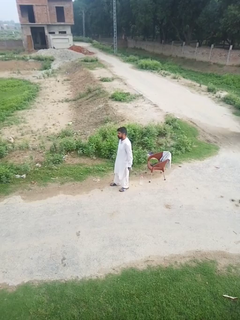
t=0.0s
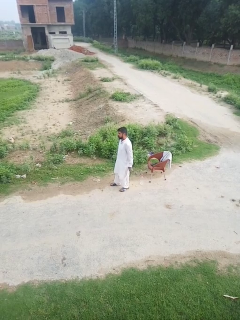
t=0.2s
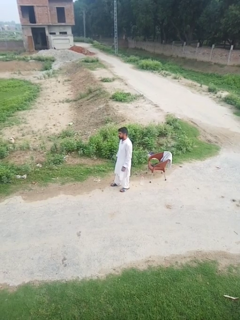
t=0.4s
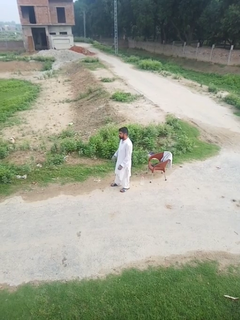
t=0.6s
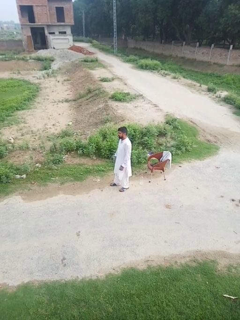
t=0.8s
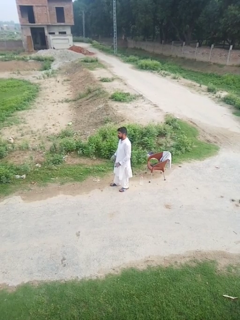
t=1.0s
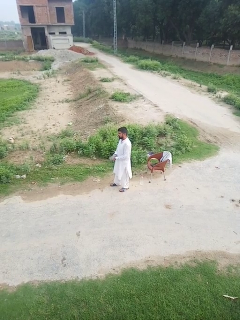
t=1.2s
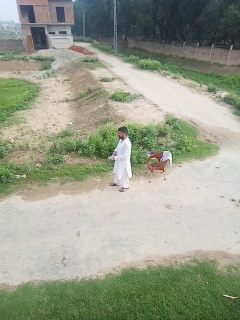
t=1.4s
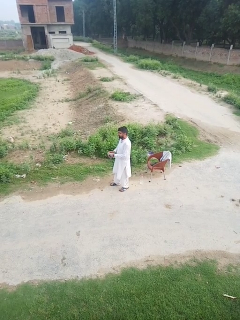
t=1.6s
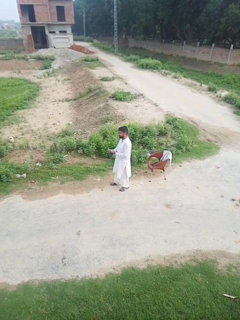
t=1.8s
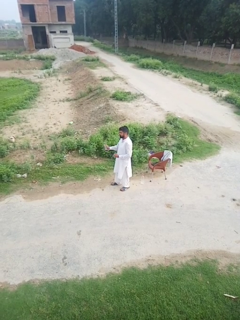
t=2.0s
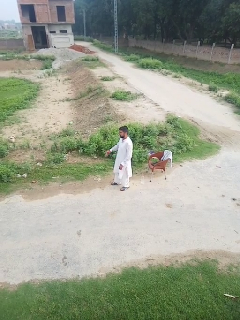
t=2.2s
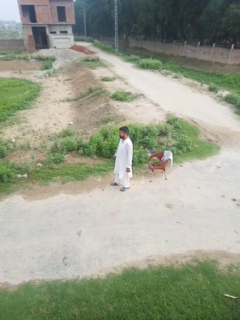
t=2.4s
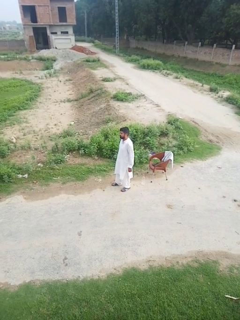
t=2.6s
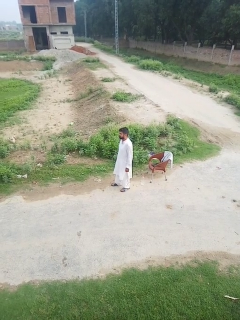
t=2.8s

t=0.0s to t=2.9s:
person takes off gloves

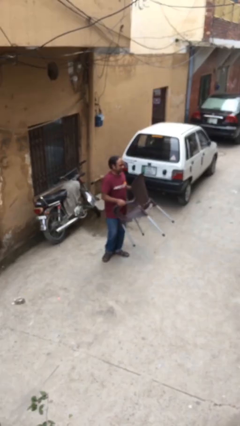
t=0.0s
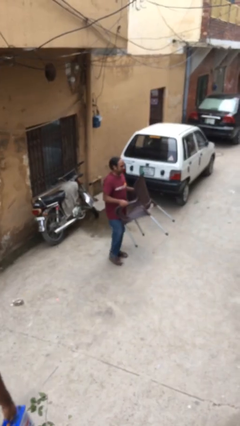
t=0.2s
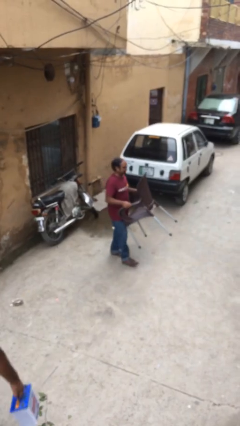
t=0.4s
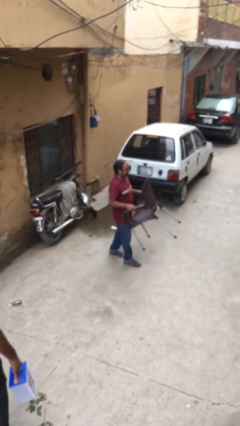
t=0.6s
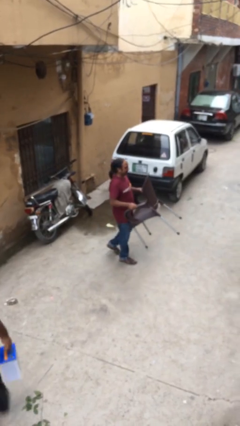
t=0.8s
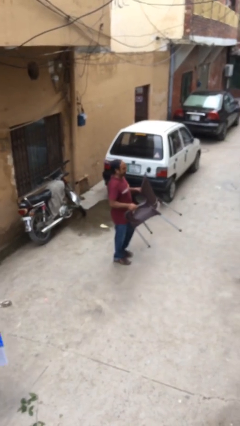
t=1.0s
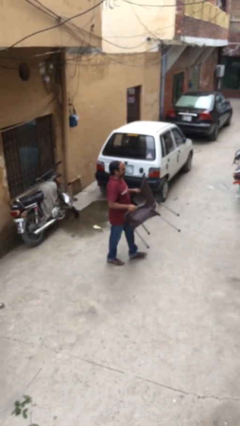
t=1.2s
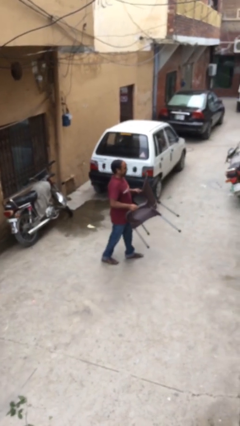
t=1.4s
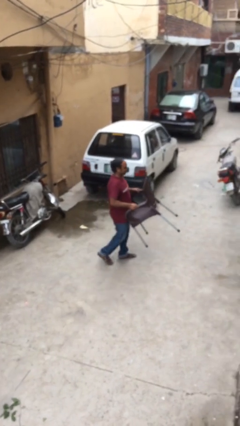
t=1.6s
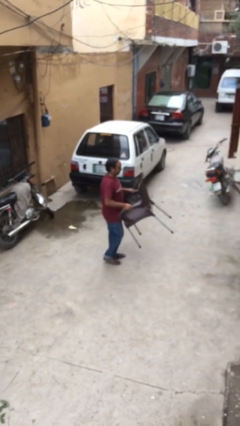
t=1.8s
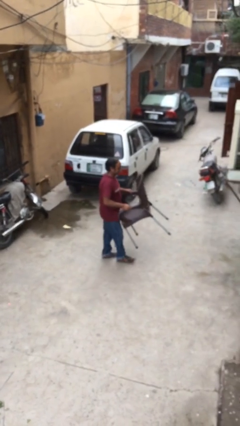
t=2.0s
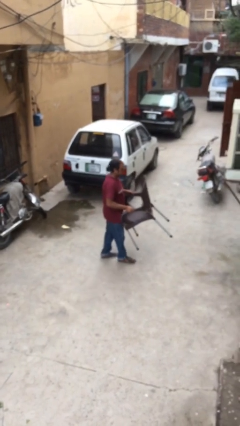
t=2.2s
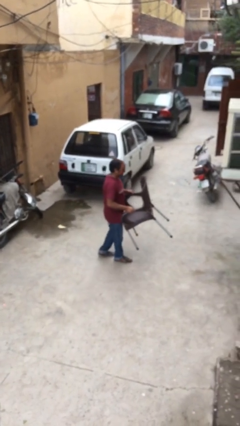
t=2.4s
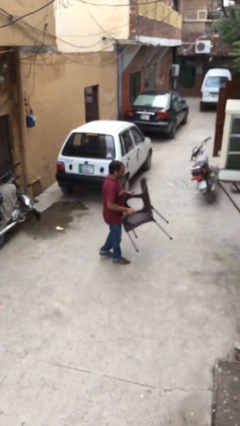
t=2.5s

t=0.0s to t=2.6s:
person carries heavy object

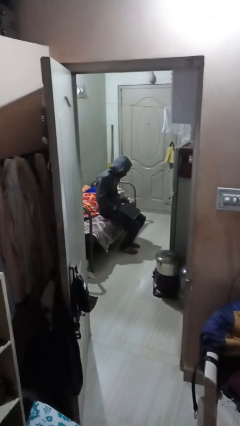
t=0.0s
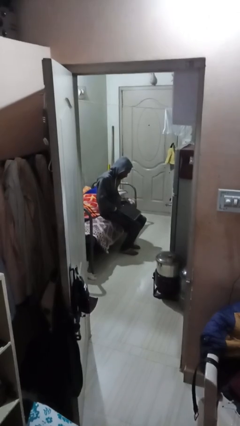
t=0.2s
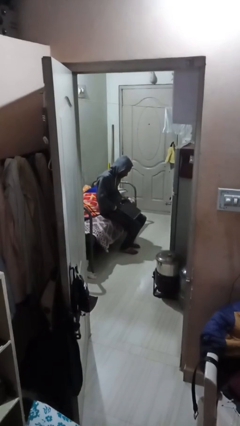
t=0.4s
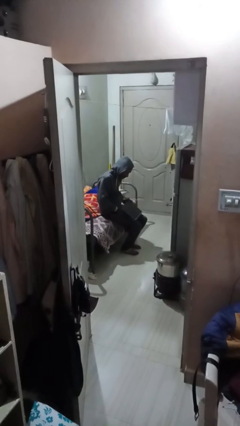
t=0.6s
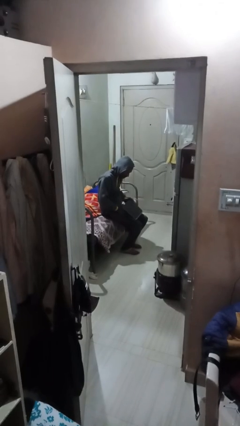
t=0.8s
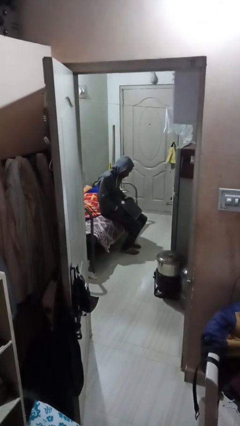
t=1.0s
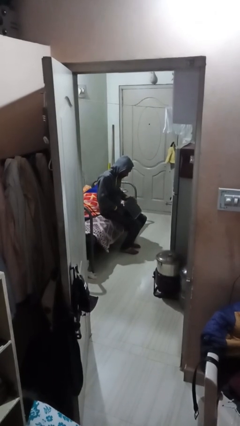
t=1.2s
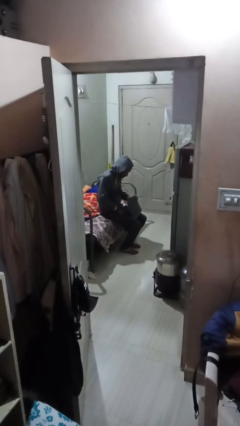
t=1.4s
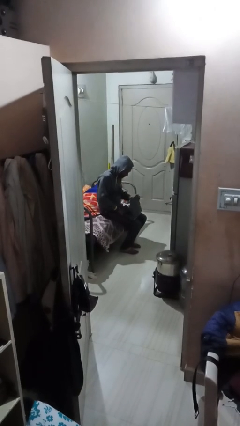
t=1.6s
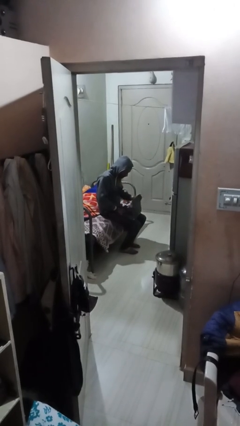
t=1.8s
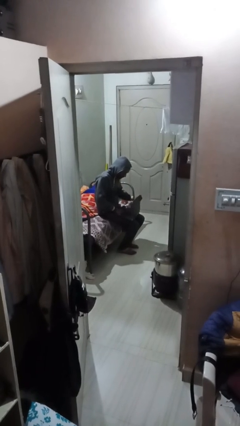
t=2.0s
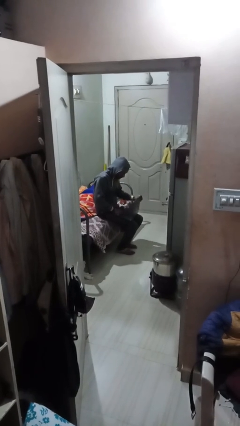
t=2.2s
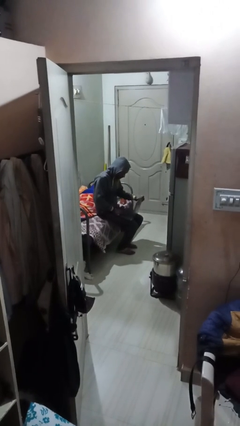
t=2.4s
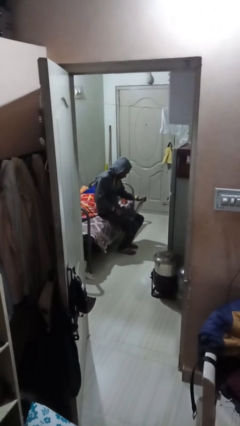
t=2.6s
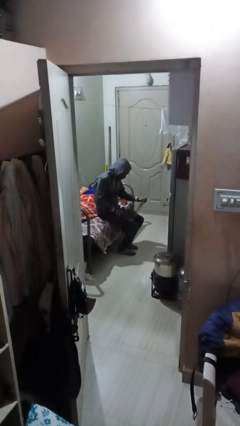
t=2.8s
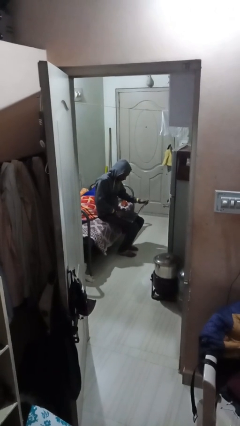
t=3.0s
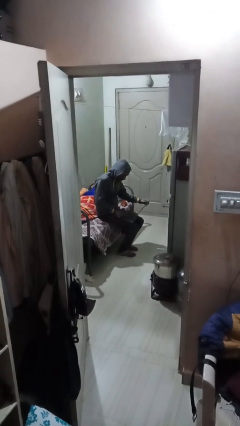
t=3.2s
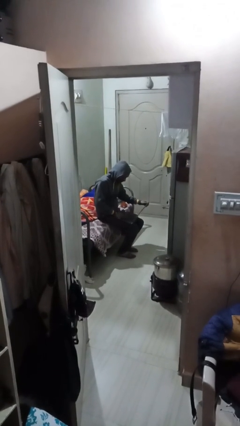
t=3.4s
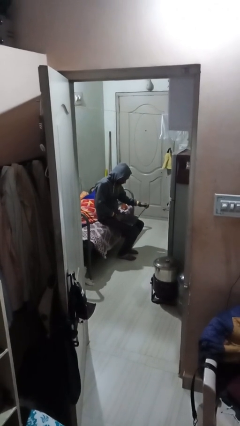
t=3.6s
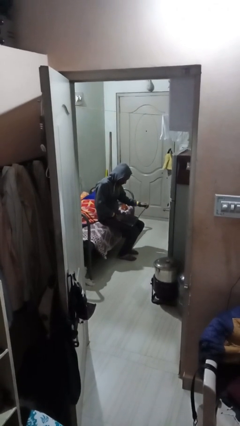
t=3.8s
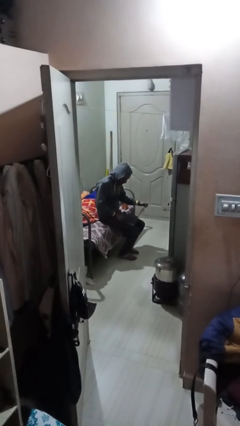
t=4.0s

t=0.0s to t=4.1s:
person interacts with laptop

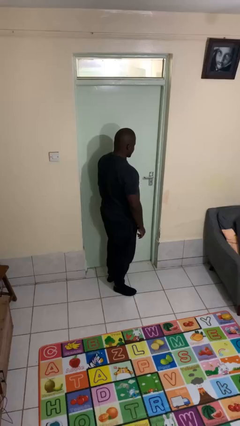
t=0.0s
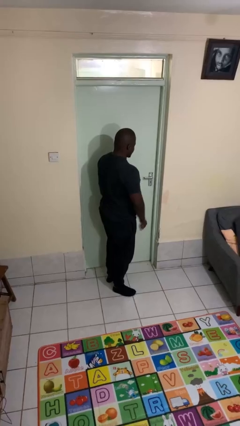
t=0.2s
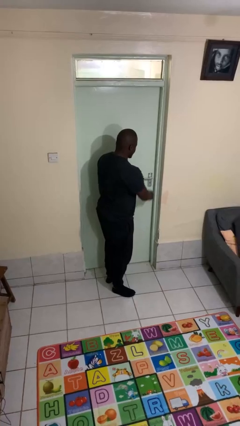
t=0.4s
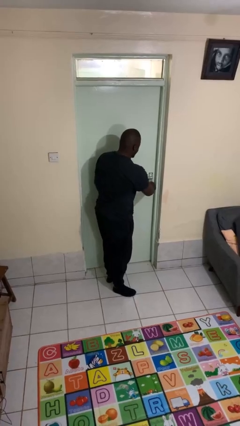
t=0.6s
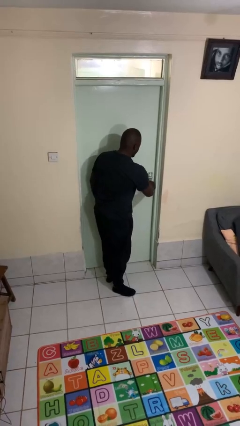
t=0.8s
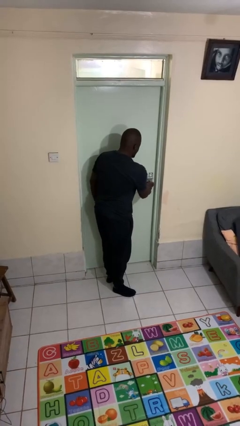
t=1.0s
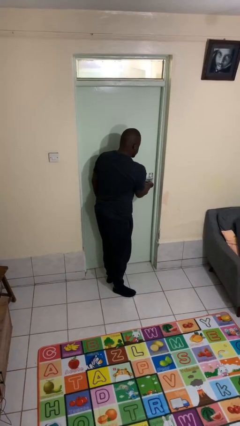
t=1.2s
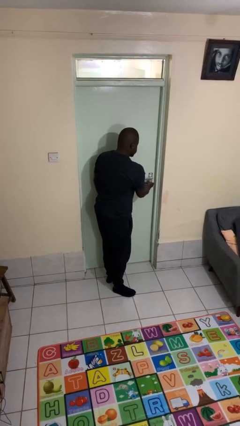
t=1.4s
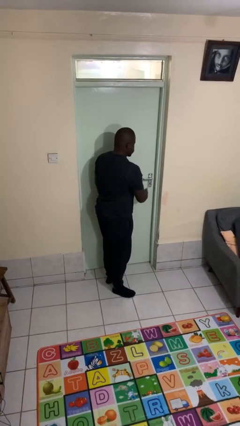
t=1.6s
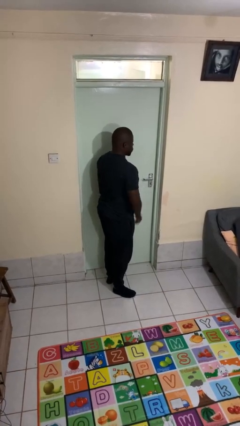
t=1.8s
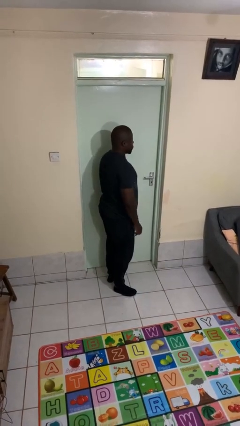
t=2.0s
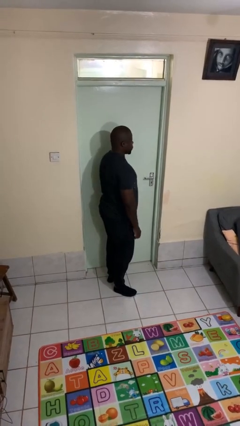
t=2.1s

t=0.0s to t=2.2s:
person locks door with keys

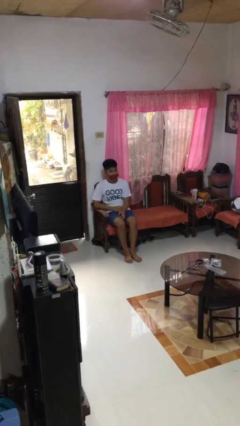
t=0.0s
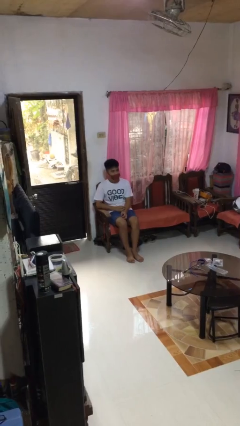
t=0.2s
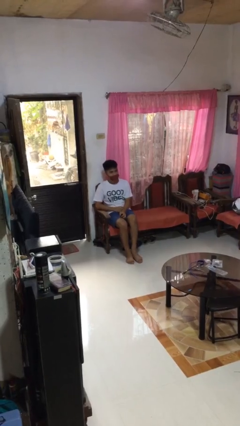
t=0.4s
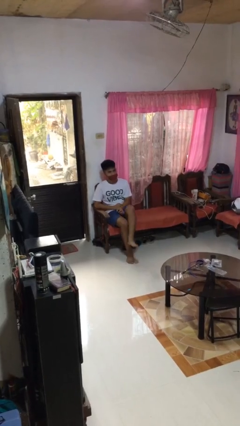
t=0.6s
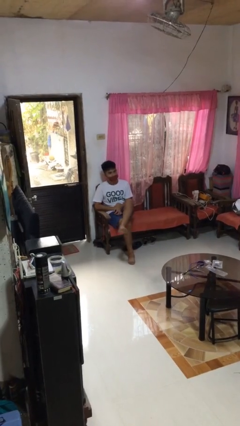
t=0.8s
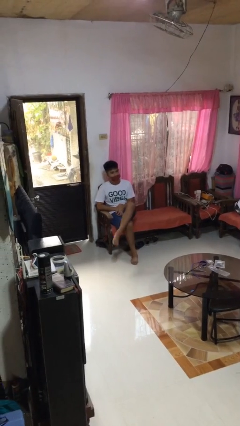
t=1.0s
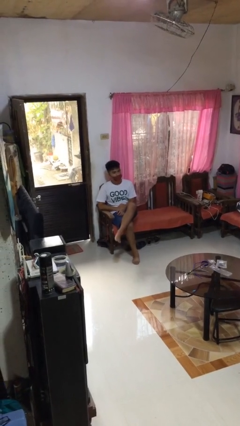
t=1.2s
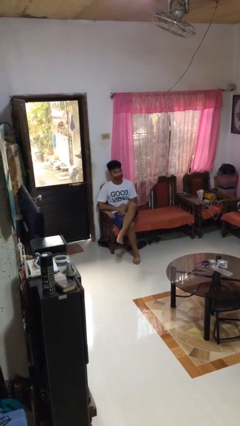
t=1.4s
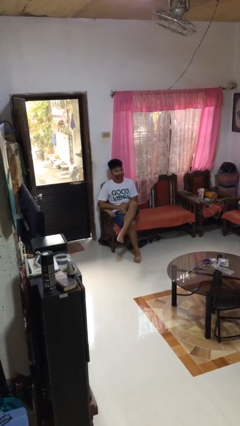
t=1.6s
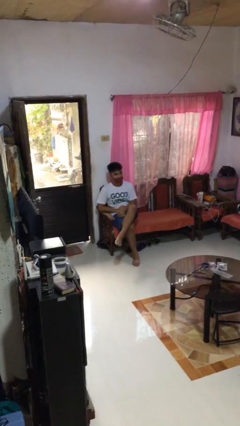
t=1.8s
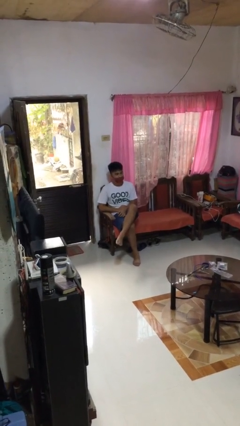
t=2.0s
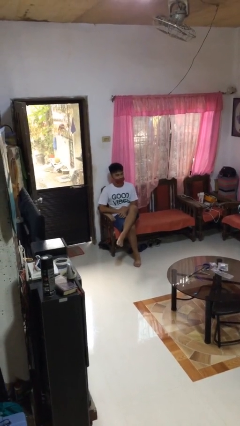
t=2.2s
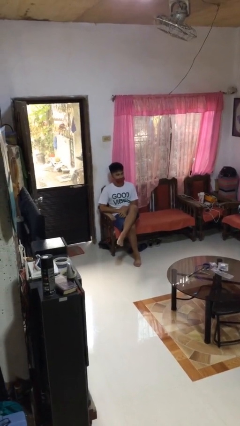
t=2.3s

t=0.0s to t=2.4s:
person crosses legs

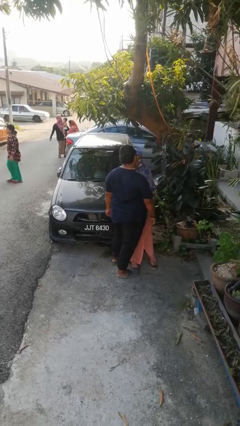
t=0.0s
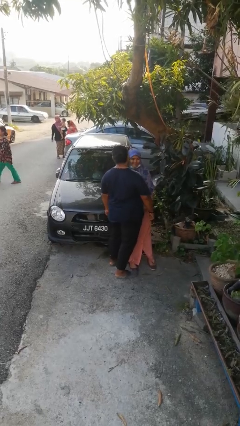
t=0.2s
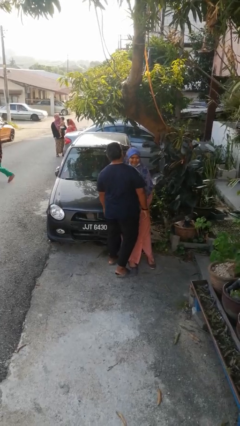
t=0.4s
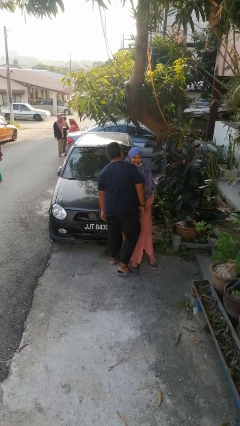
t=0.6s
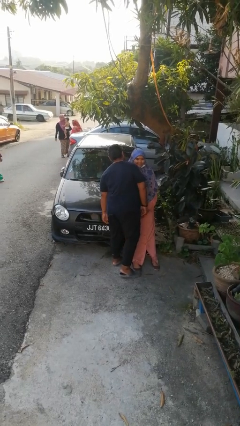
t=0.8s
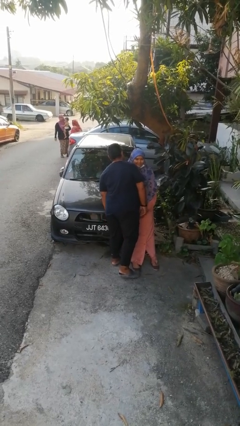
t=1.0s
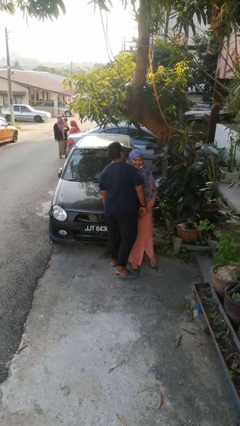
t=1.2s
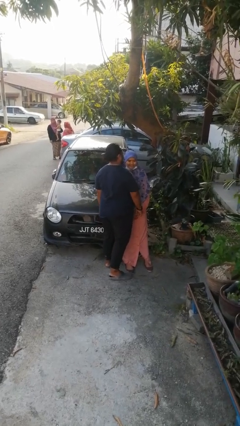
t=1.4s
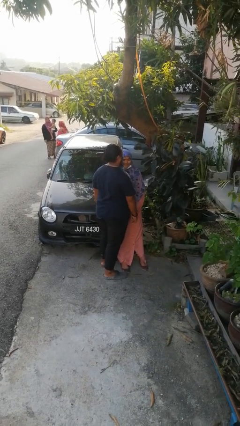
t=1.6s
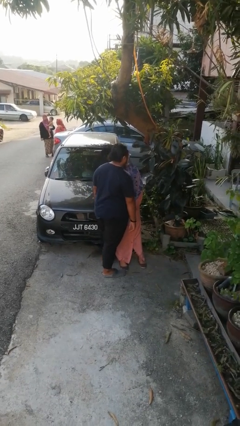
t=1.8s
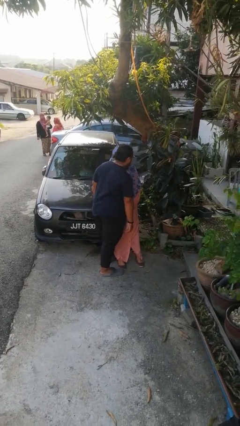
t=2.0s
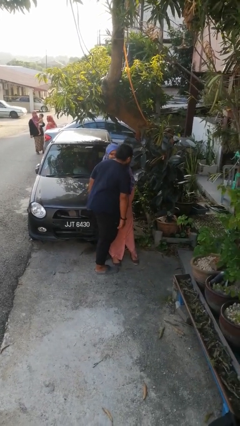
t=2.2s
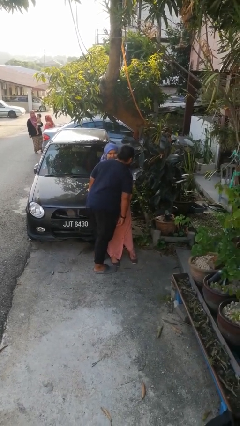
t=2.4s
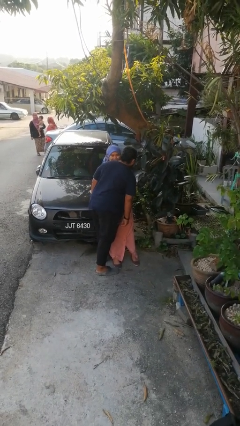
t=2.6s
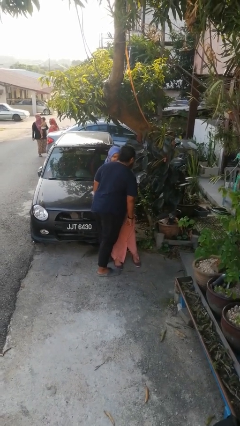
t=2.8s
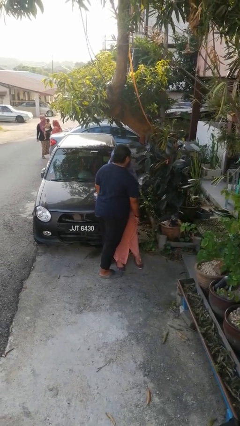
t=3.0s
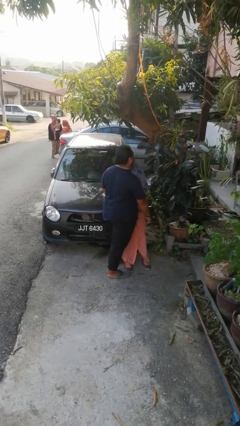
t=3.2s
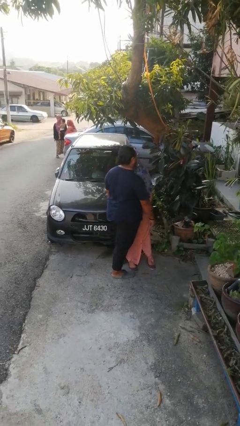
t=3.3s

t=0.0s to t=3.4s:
person kisses cheek of person

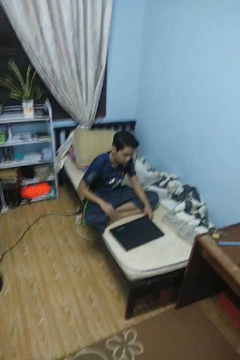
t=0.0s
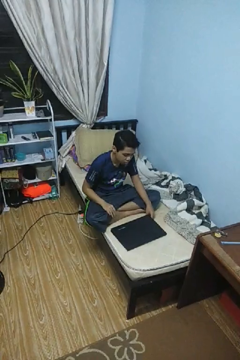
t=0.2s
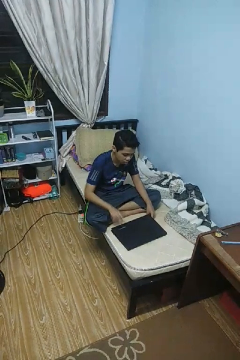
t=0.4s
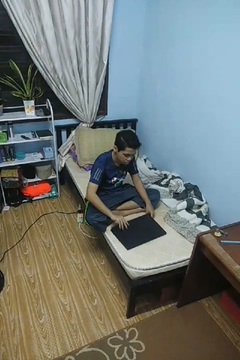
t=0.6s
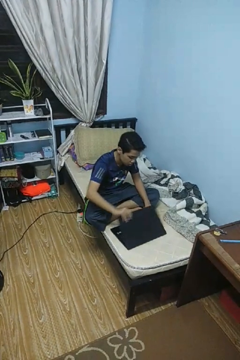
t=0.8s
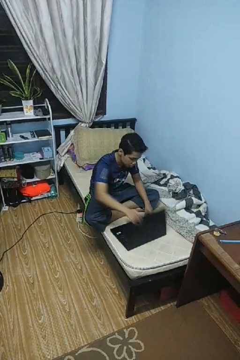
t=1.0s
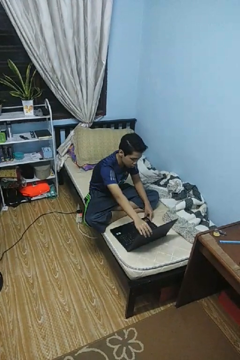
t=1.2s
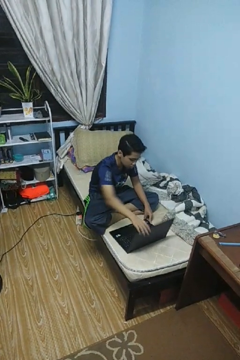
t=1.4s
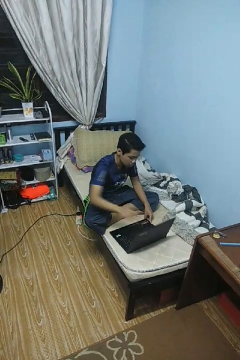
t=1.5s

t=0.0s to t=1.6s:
person opens laptop
